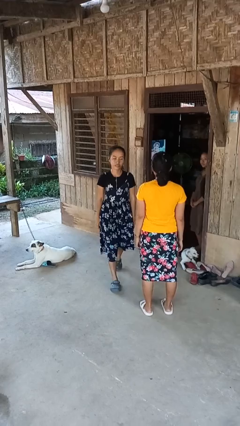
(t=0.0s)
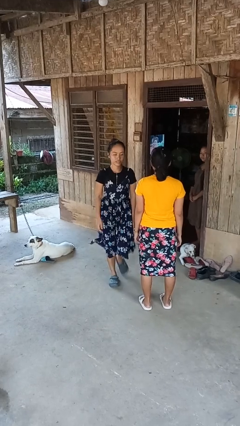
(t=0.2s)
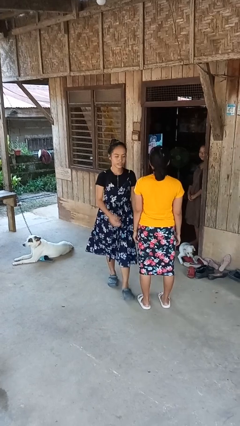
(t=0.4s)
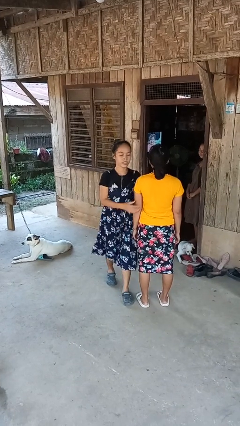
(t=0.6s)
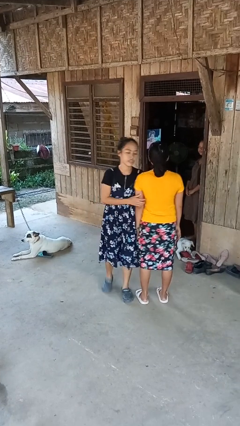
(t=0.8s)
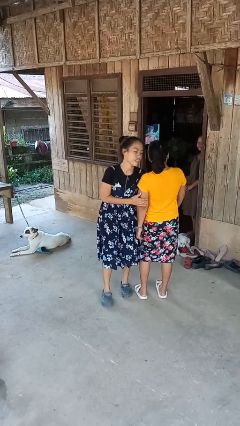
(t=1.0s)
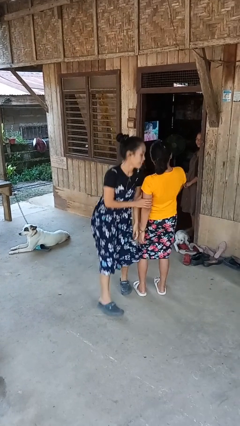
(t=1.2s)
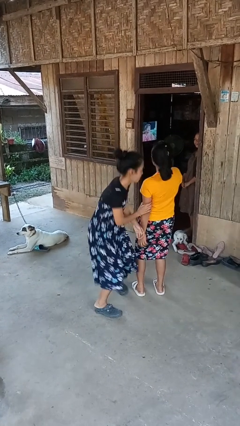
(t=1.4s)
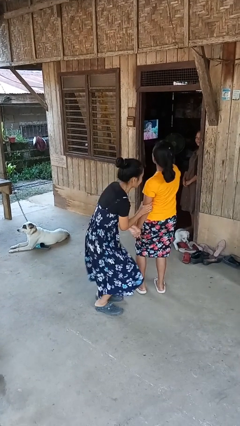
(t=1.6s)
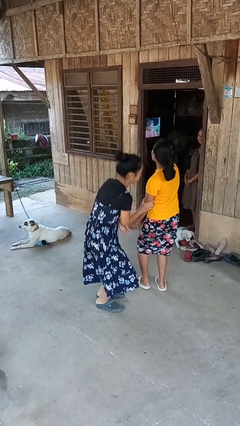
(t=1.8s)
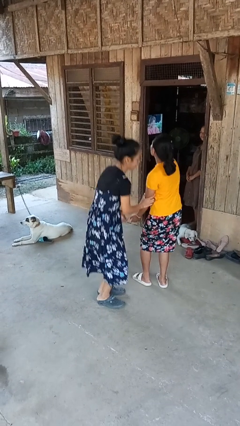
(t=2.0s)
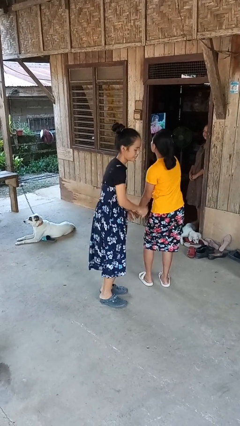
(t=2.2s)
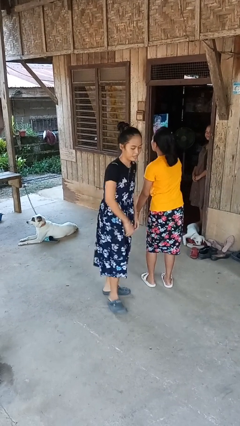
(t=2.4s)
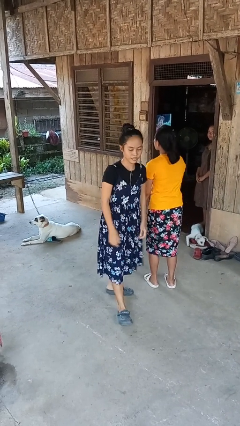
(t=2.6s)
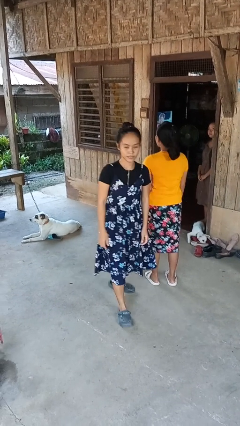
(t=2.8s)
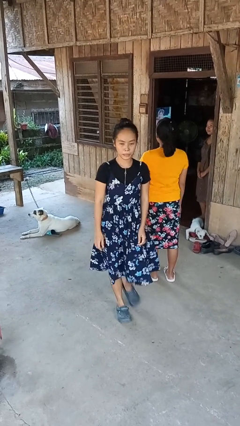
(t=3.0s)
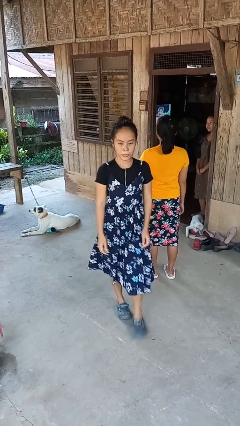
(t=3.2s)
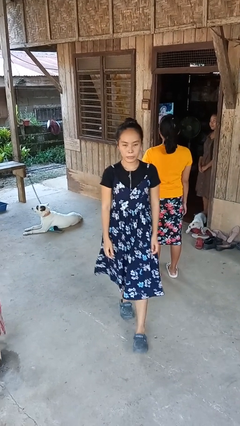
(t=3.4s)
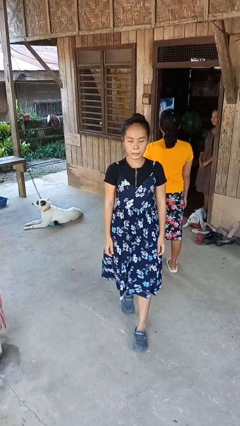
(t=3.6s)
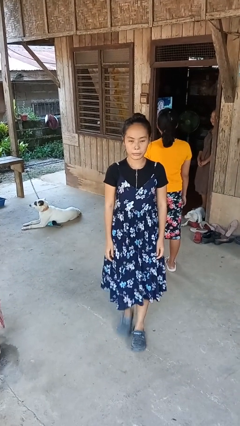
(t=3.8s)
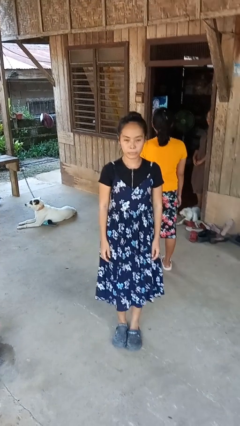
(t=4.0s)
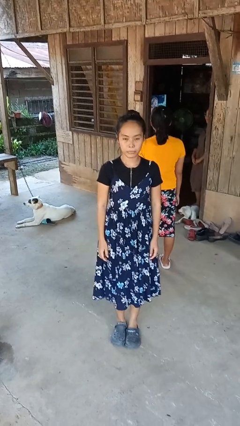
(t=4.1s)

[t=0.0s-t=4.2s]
person bumps into person

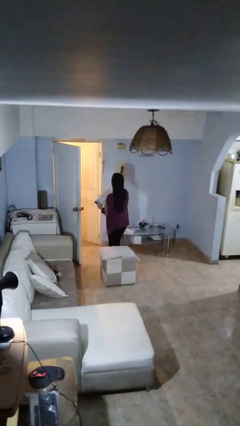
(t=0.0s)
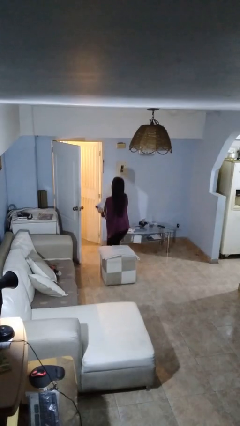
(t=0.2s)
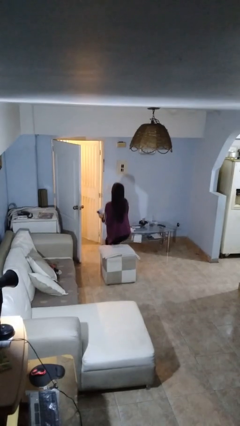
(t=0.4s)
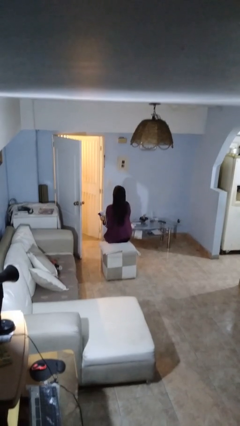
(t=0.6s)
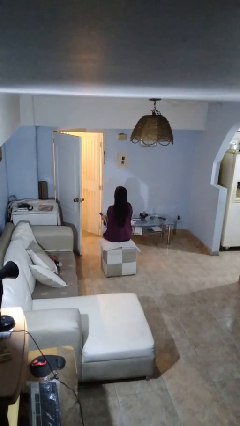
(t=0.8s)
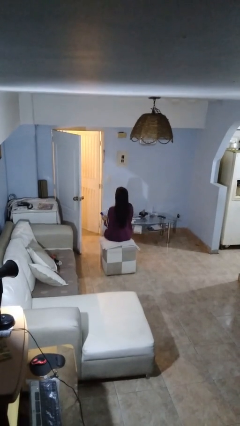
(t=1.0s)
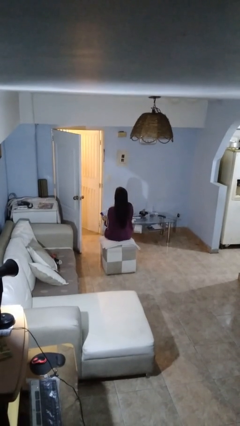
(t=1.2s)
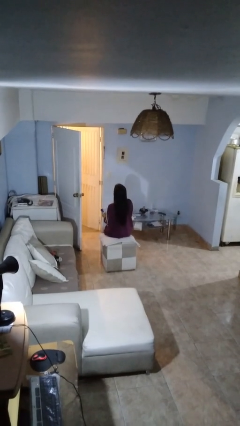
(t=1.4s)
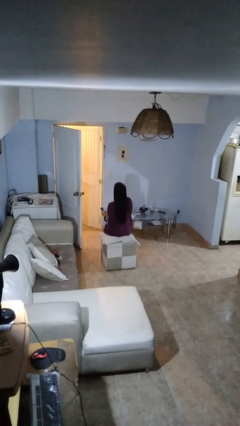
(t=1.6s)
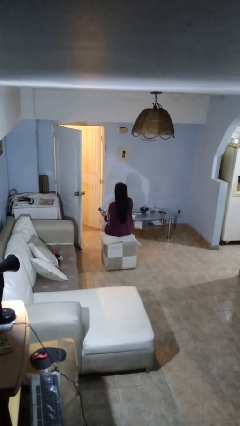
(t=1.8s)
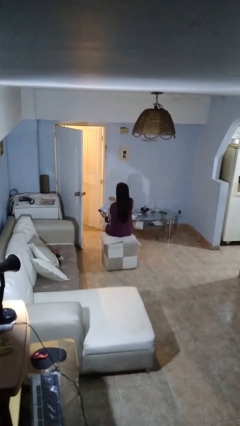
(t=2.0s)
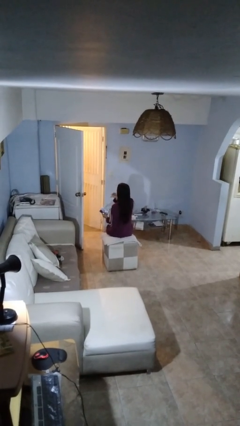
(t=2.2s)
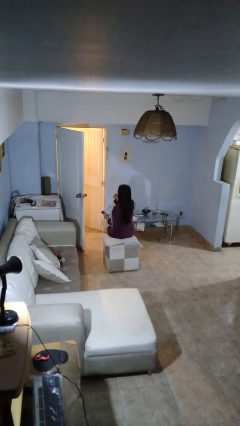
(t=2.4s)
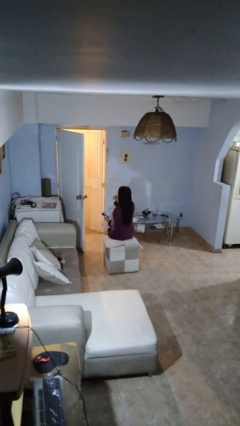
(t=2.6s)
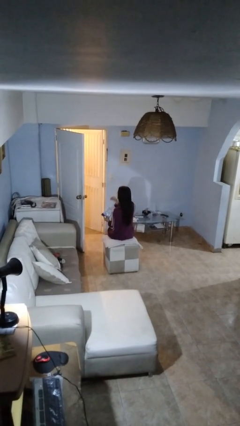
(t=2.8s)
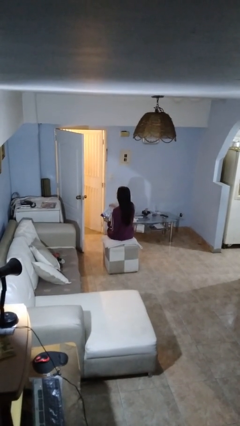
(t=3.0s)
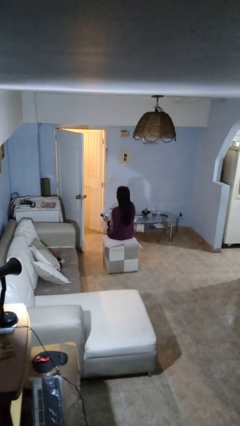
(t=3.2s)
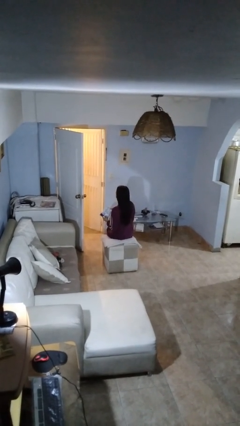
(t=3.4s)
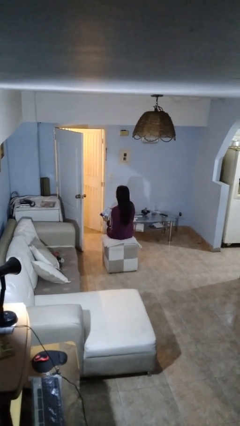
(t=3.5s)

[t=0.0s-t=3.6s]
person eats snack from bag

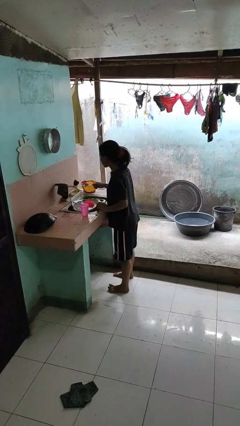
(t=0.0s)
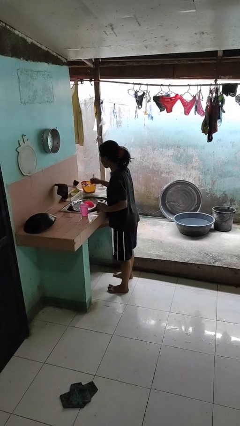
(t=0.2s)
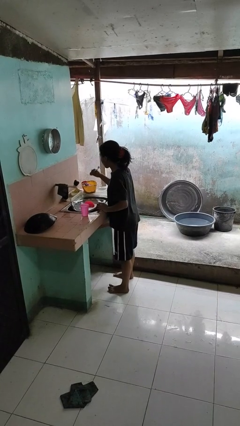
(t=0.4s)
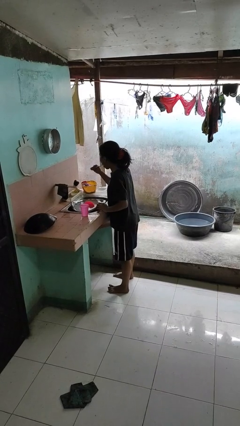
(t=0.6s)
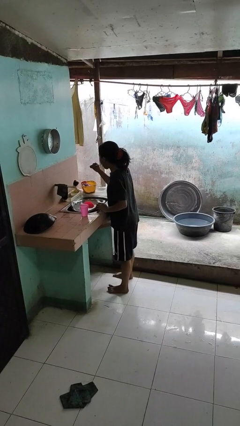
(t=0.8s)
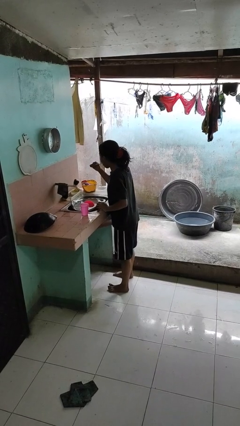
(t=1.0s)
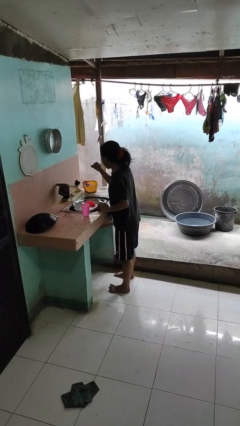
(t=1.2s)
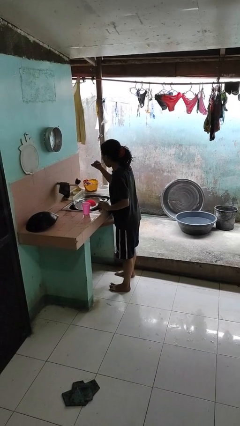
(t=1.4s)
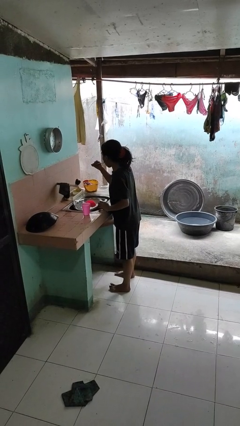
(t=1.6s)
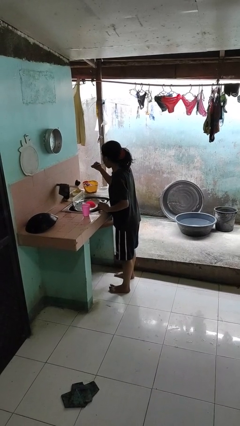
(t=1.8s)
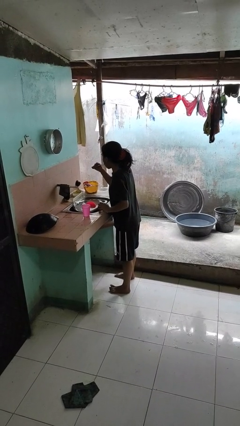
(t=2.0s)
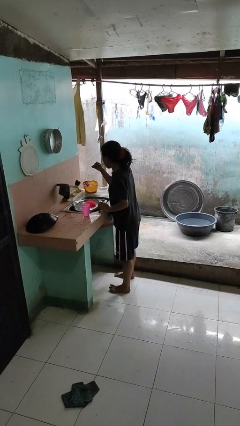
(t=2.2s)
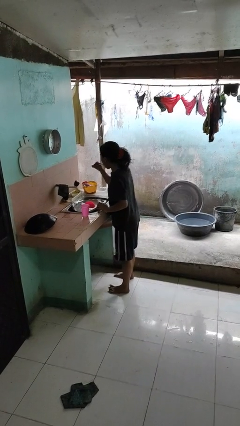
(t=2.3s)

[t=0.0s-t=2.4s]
person brushes teeth

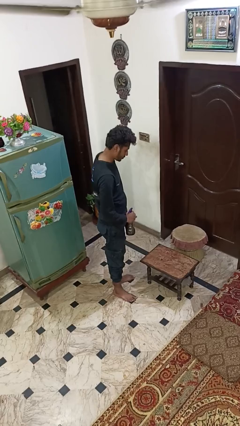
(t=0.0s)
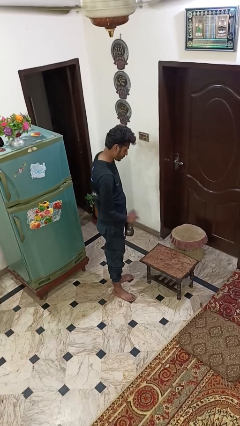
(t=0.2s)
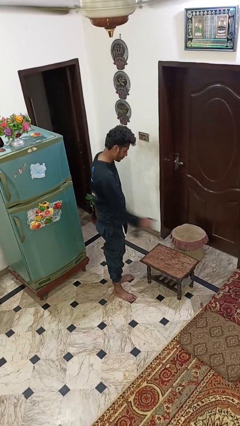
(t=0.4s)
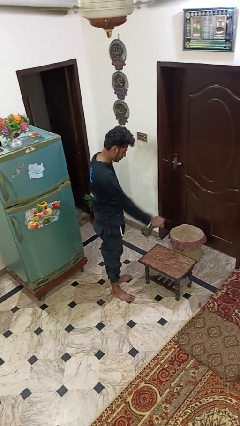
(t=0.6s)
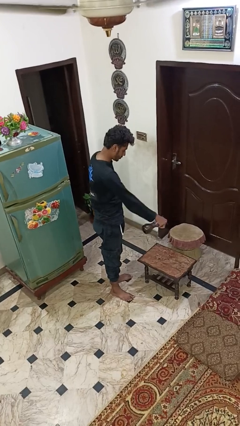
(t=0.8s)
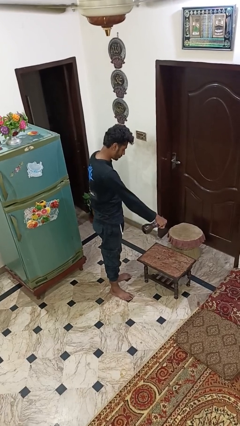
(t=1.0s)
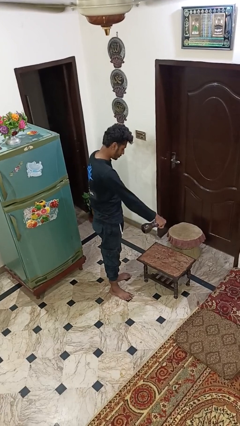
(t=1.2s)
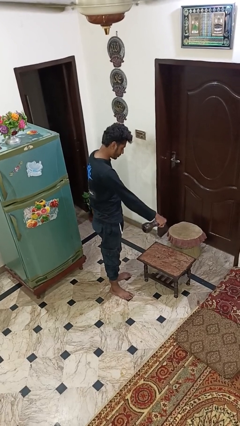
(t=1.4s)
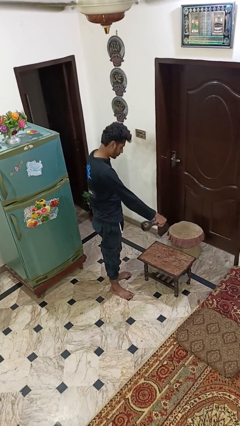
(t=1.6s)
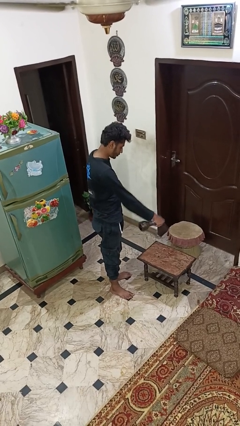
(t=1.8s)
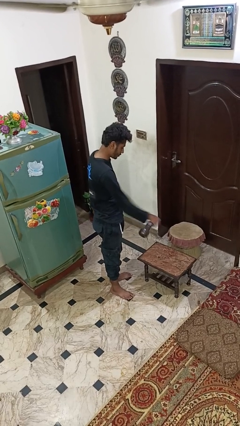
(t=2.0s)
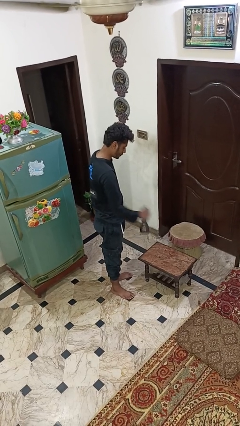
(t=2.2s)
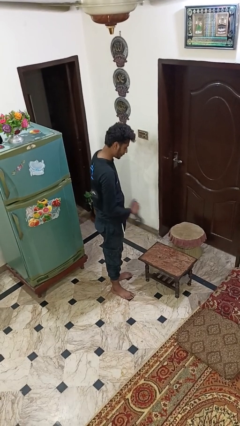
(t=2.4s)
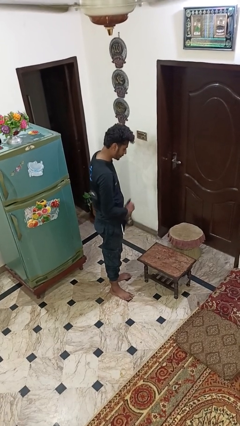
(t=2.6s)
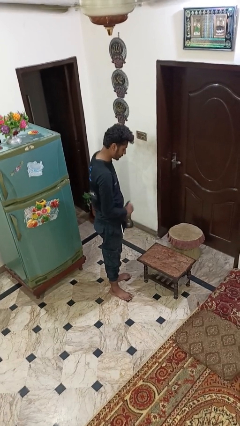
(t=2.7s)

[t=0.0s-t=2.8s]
person sprays from bottle

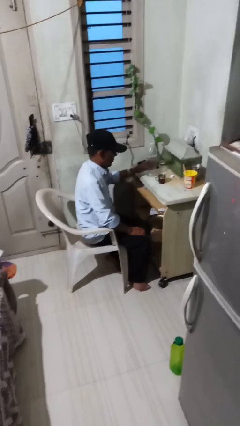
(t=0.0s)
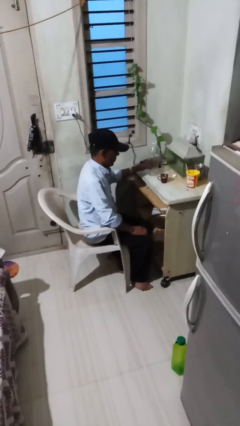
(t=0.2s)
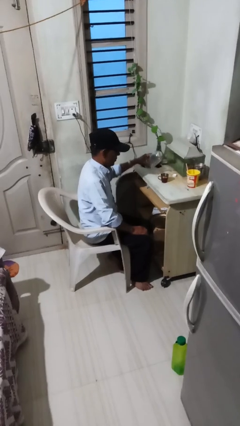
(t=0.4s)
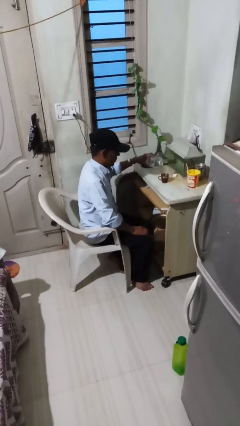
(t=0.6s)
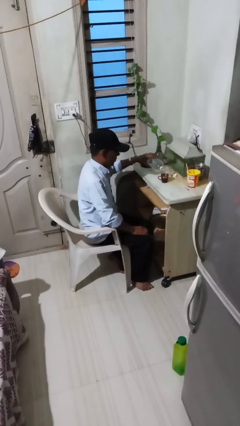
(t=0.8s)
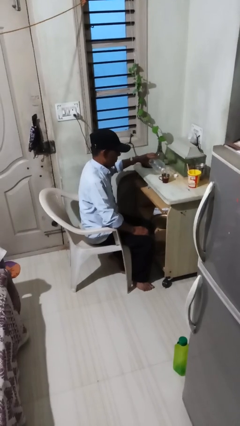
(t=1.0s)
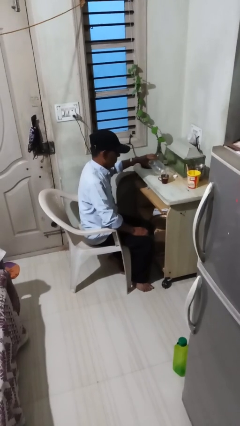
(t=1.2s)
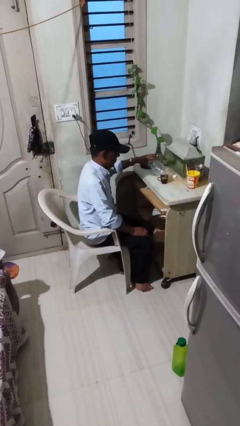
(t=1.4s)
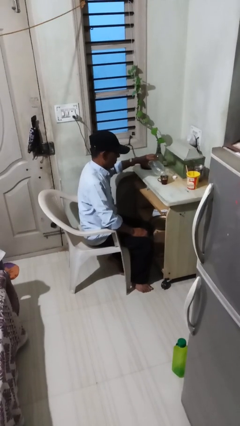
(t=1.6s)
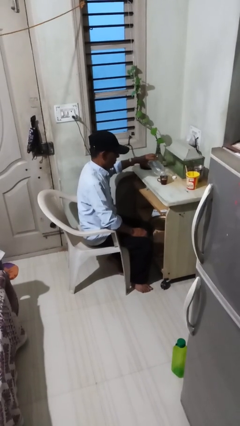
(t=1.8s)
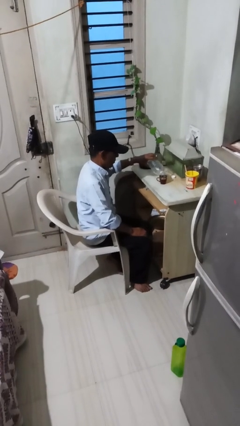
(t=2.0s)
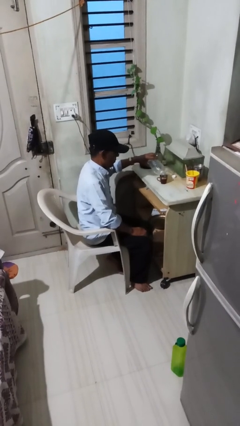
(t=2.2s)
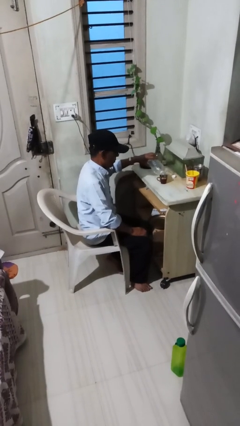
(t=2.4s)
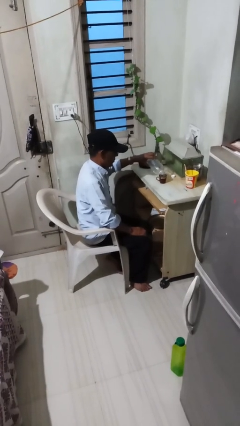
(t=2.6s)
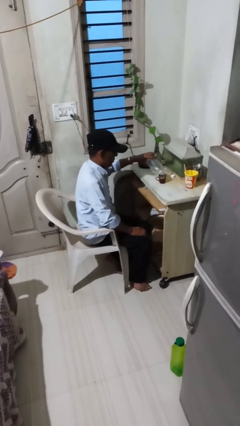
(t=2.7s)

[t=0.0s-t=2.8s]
person pours liquid into cup

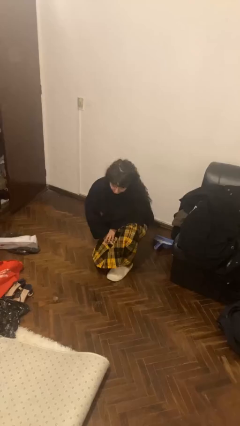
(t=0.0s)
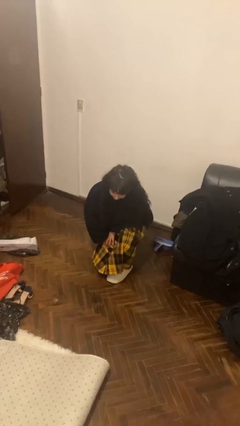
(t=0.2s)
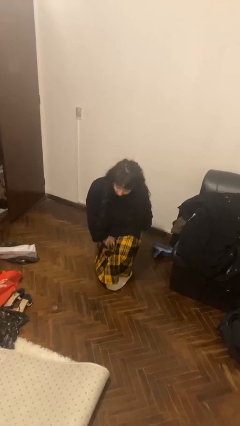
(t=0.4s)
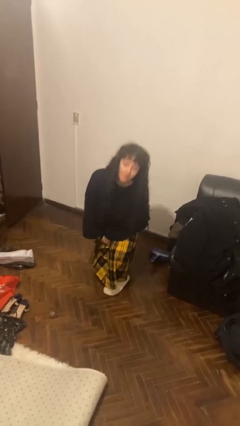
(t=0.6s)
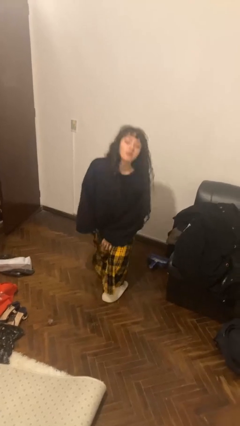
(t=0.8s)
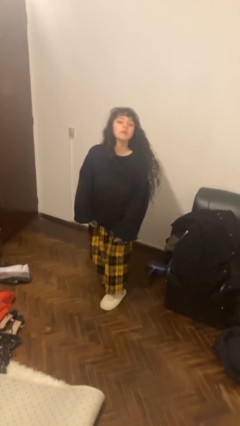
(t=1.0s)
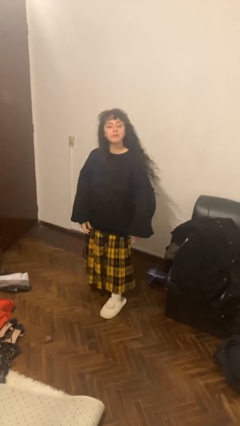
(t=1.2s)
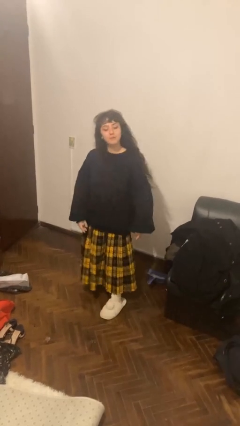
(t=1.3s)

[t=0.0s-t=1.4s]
person stands up from floor
